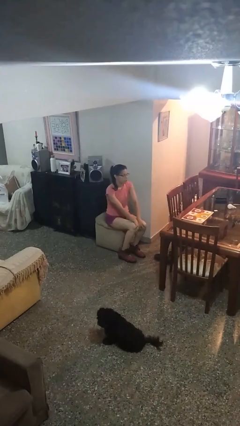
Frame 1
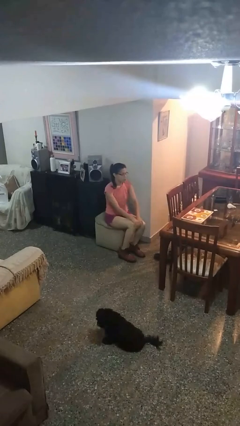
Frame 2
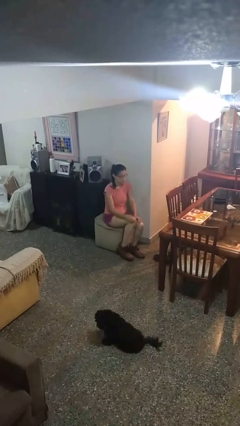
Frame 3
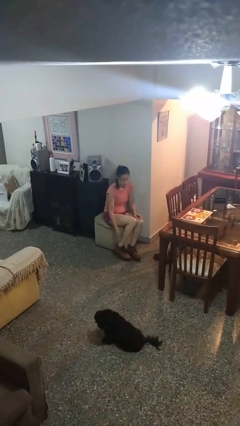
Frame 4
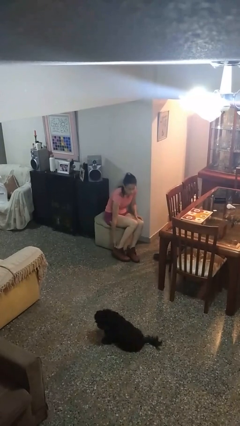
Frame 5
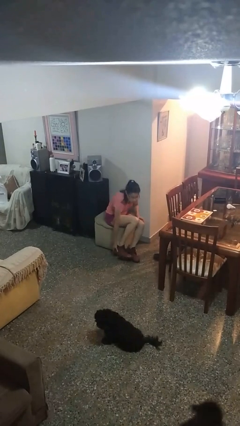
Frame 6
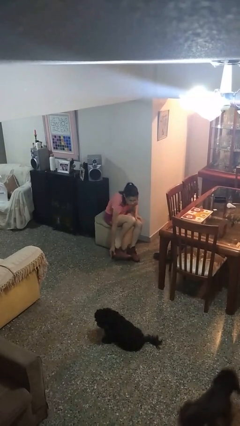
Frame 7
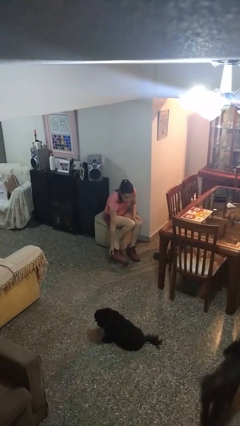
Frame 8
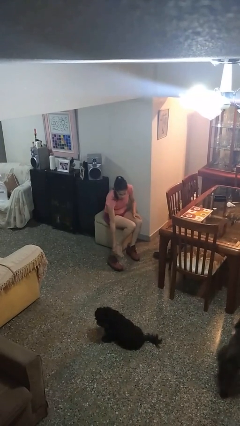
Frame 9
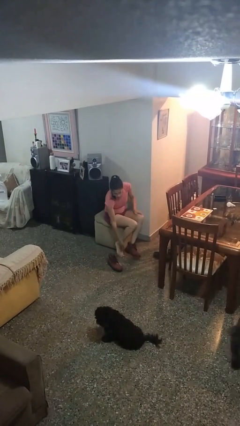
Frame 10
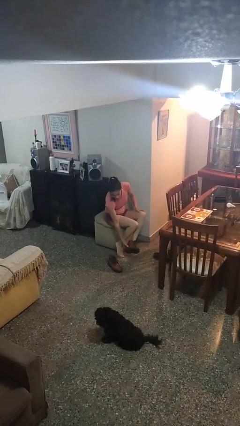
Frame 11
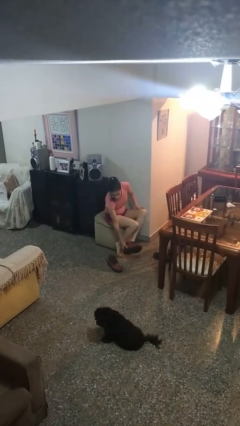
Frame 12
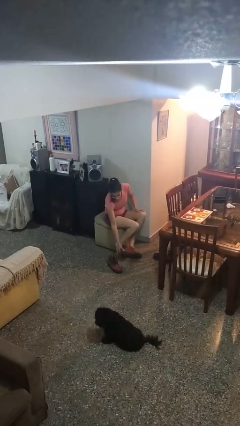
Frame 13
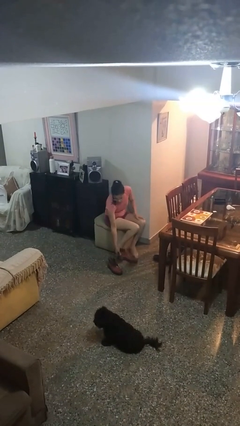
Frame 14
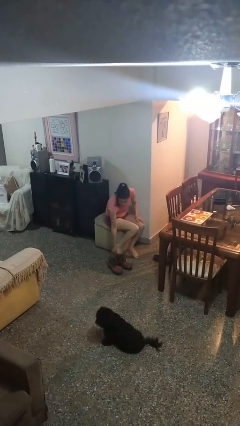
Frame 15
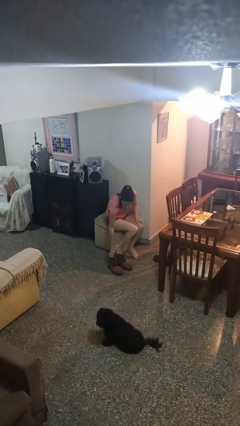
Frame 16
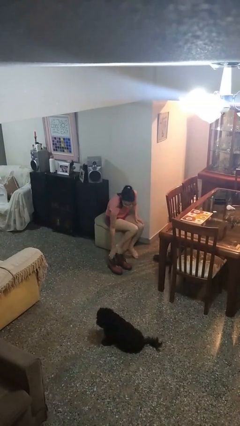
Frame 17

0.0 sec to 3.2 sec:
person takes off boots

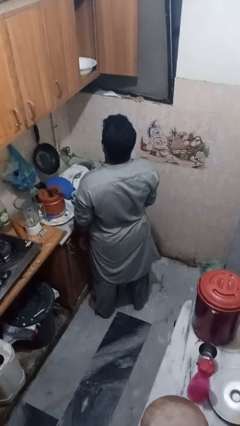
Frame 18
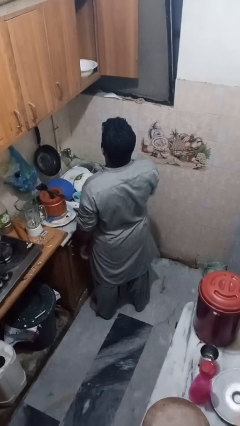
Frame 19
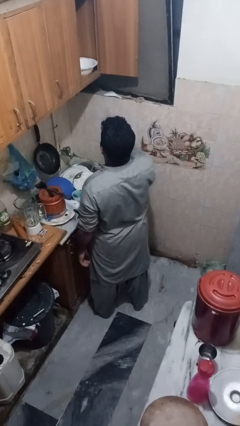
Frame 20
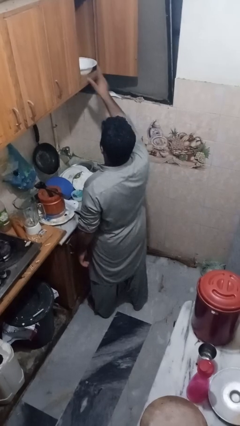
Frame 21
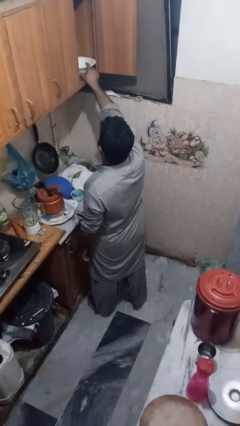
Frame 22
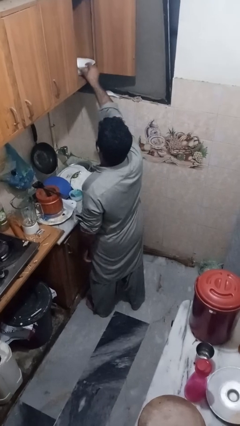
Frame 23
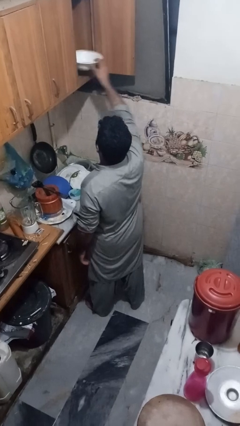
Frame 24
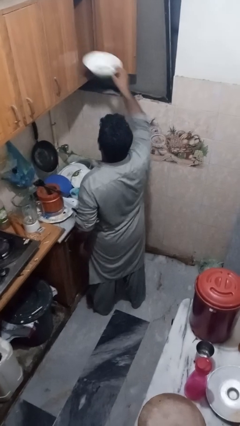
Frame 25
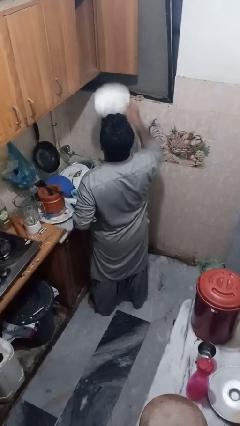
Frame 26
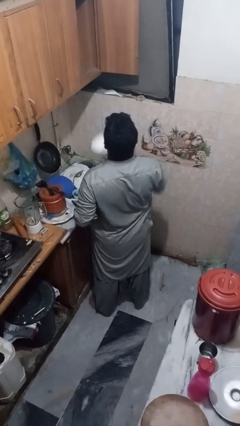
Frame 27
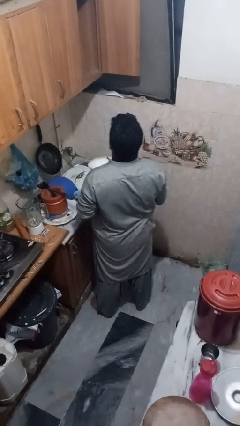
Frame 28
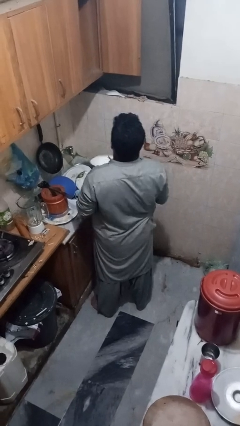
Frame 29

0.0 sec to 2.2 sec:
person takes object from cabinet

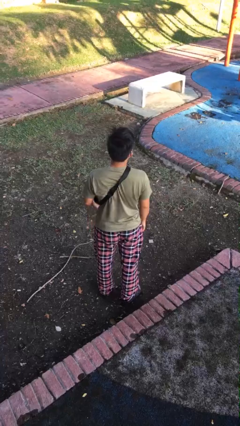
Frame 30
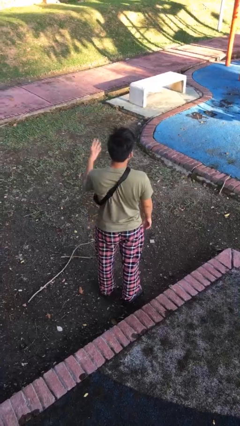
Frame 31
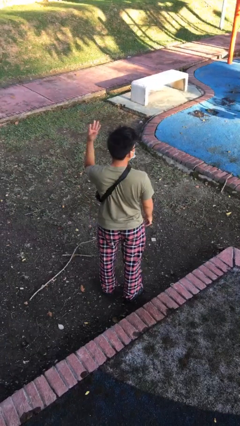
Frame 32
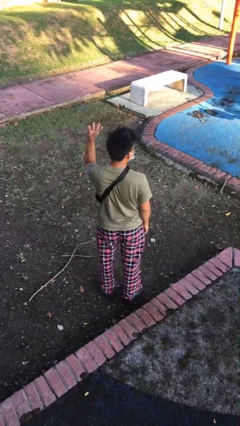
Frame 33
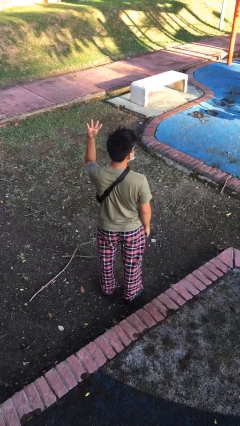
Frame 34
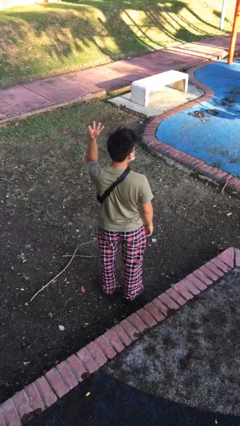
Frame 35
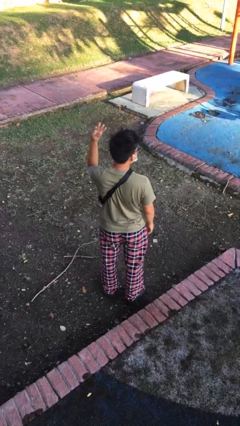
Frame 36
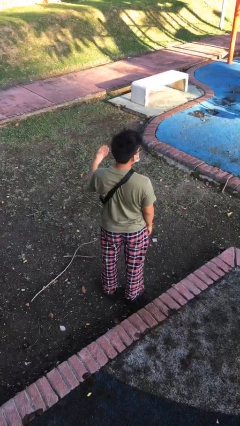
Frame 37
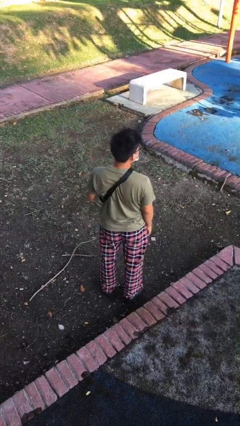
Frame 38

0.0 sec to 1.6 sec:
person gestures number four

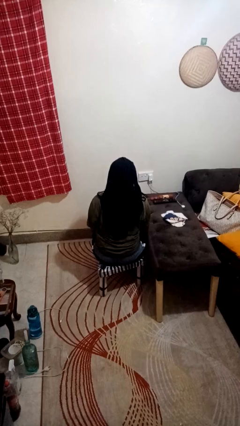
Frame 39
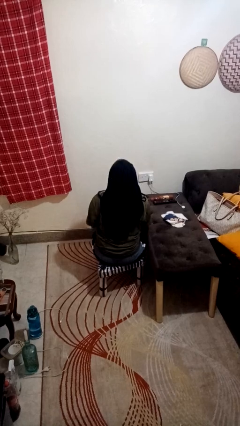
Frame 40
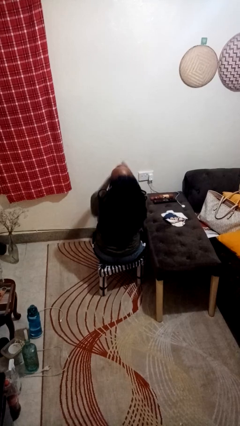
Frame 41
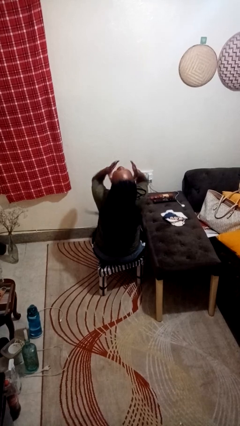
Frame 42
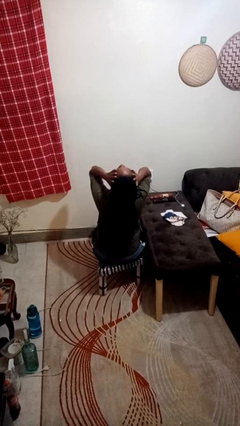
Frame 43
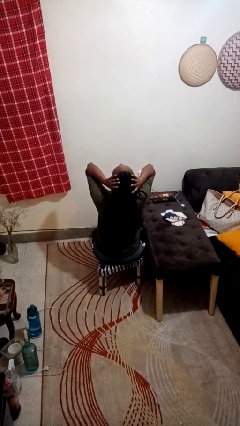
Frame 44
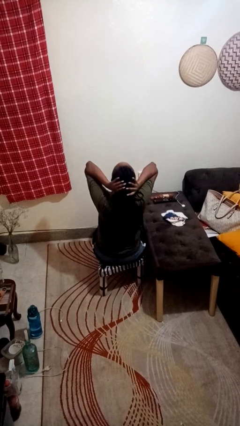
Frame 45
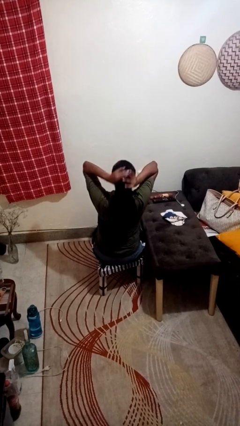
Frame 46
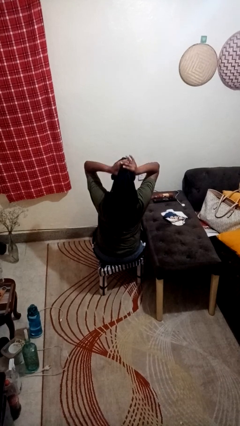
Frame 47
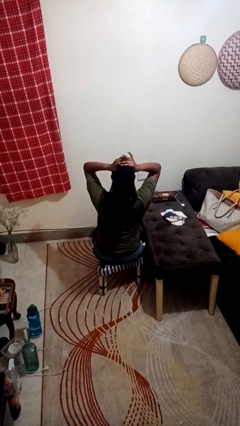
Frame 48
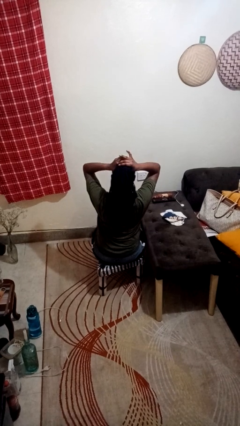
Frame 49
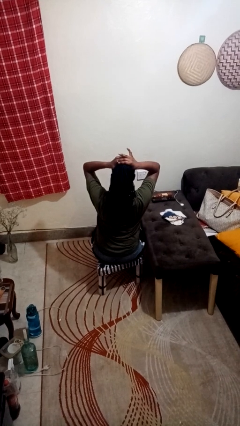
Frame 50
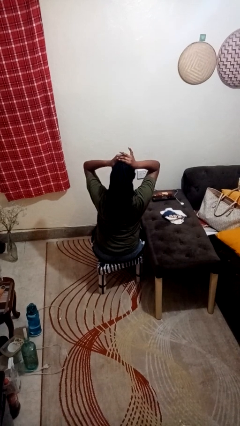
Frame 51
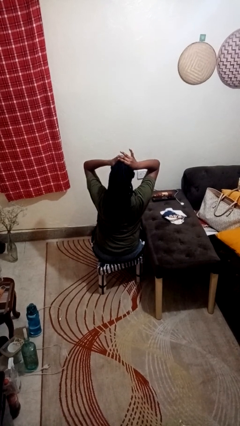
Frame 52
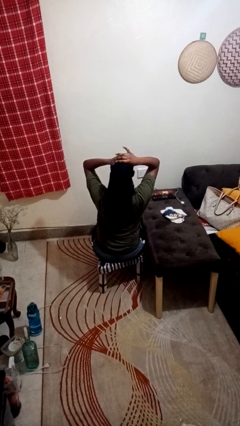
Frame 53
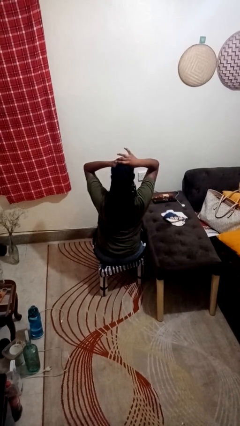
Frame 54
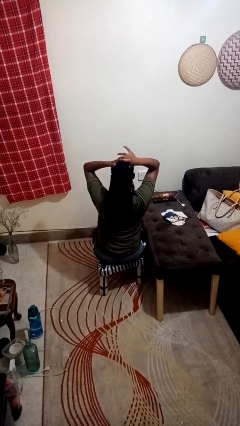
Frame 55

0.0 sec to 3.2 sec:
person puts hair in ponytail

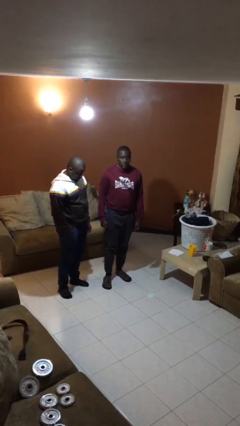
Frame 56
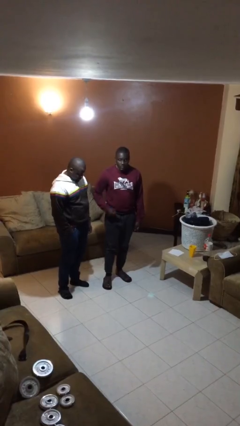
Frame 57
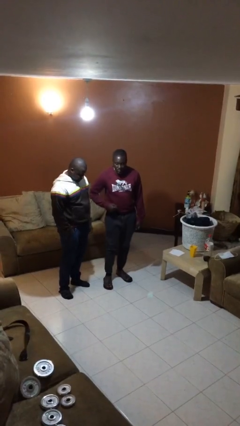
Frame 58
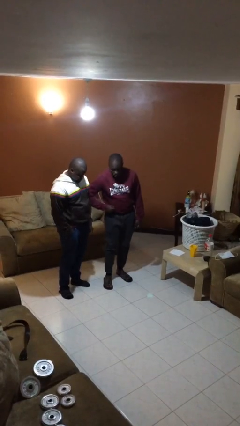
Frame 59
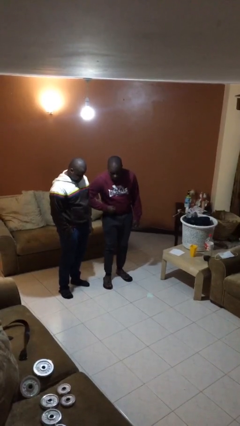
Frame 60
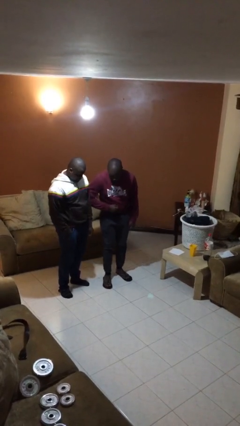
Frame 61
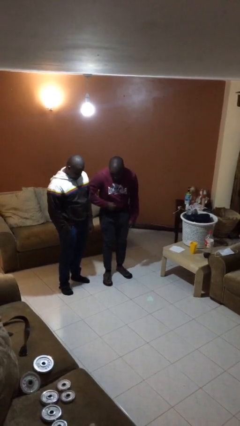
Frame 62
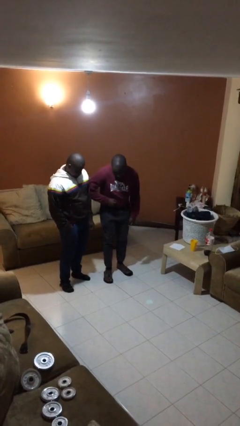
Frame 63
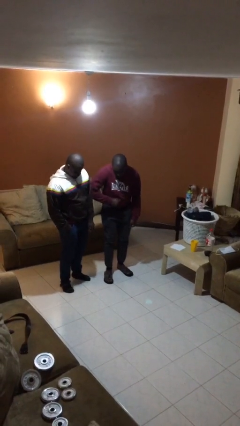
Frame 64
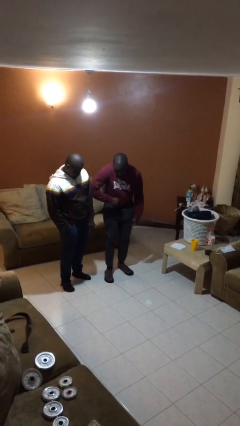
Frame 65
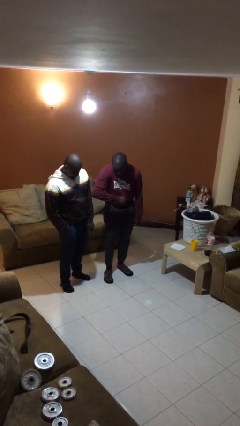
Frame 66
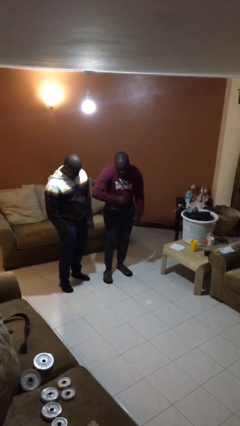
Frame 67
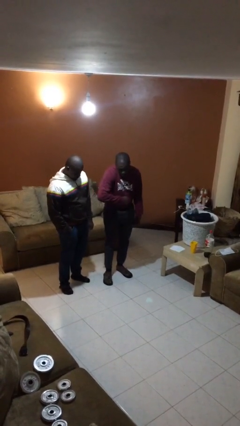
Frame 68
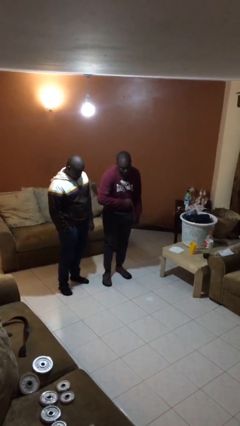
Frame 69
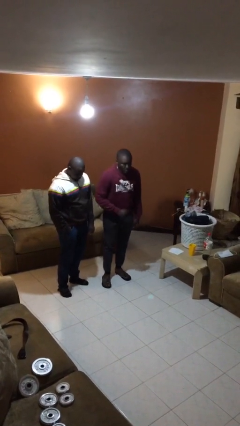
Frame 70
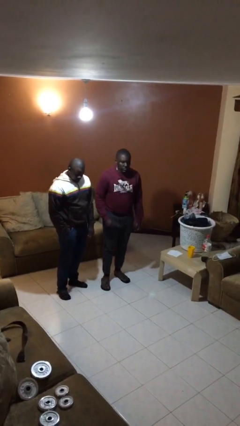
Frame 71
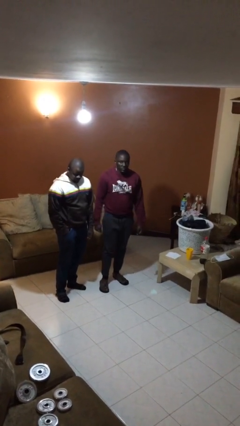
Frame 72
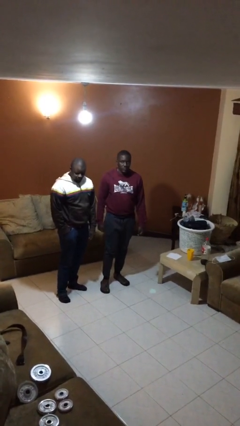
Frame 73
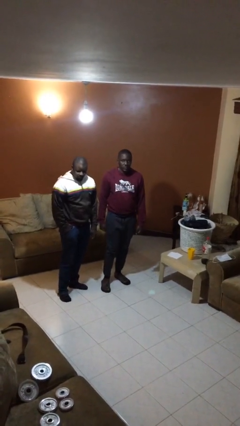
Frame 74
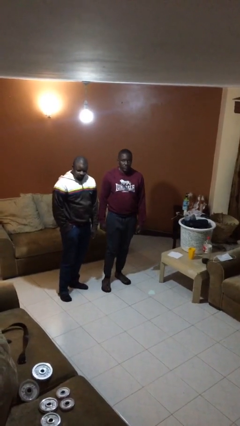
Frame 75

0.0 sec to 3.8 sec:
person nudges person with elbow

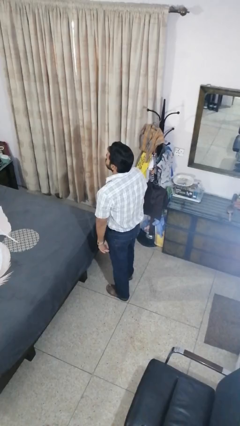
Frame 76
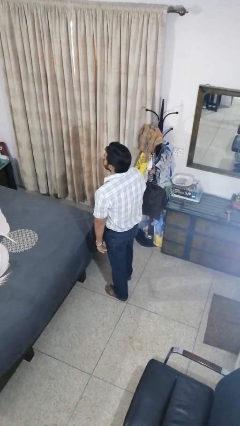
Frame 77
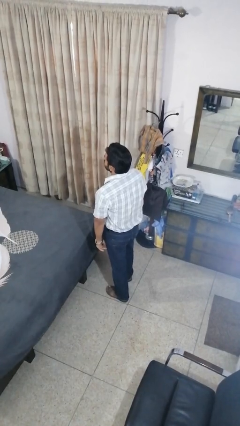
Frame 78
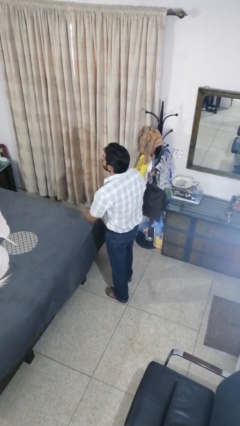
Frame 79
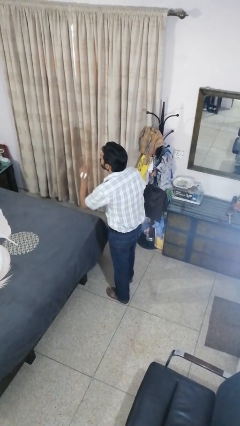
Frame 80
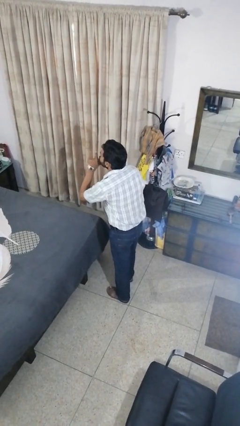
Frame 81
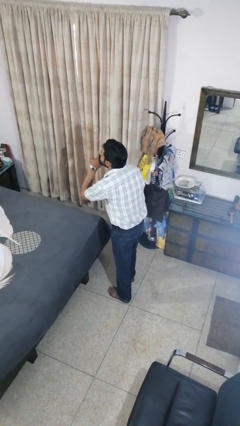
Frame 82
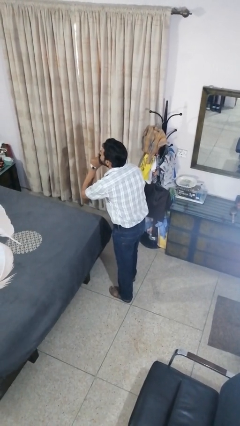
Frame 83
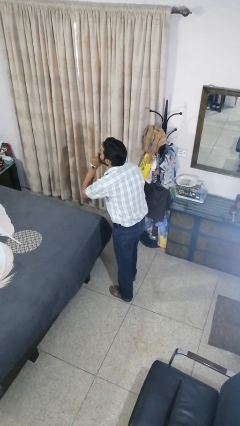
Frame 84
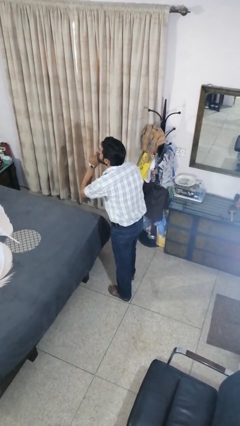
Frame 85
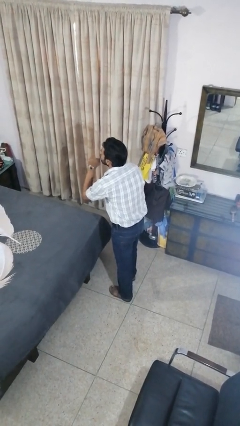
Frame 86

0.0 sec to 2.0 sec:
person gestures be quiet

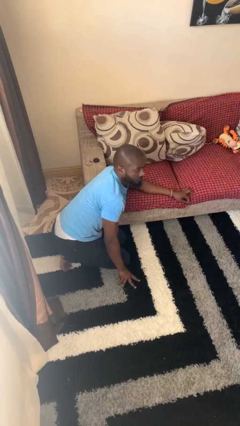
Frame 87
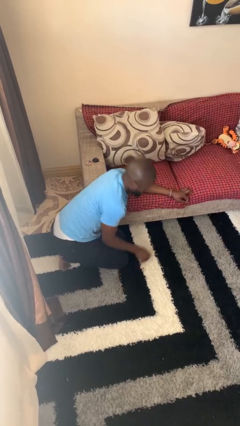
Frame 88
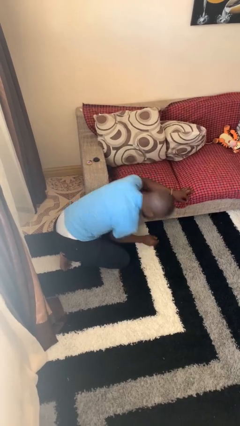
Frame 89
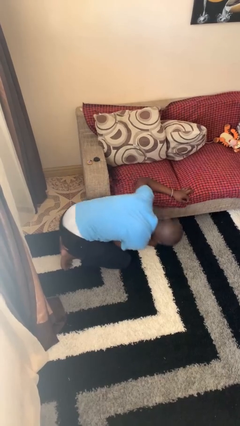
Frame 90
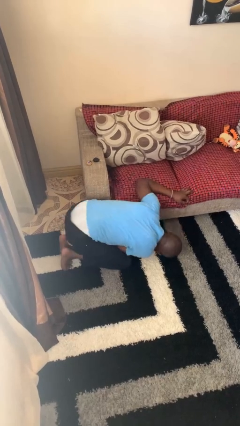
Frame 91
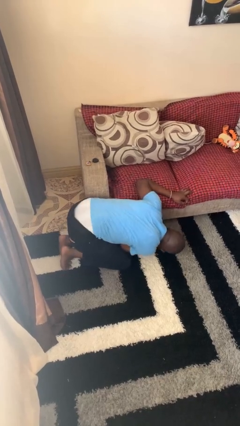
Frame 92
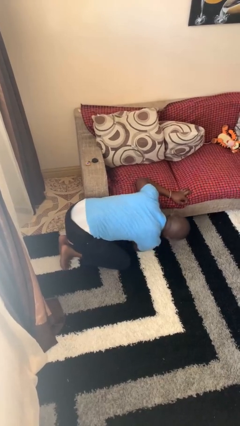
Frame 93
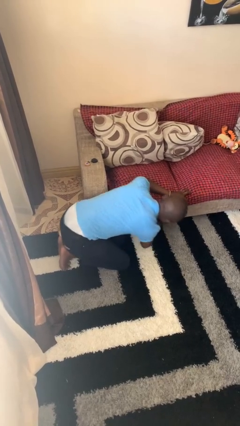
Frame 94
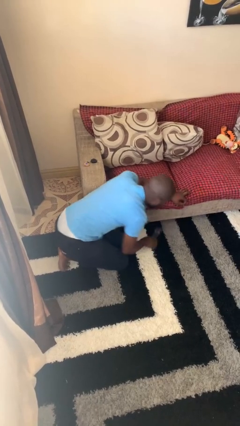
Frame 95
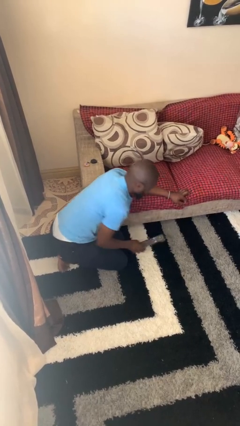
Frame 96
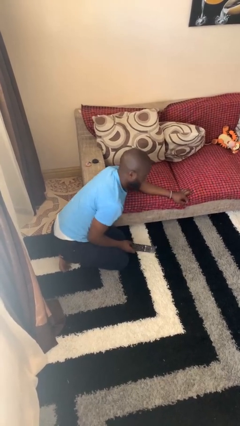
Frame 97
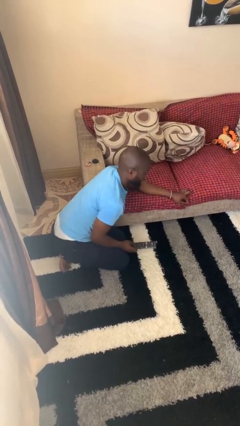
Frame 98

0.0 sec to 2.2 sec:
person searches under couch
